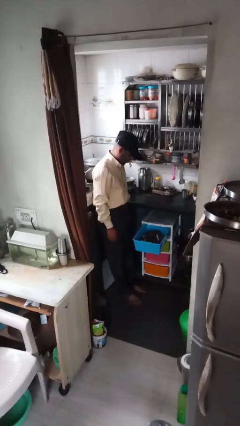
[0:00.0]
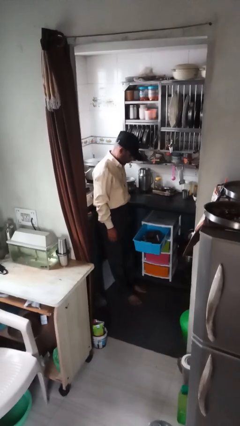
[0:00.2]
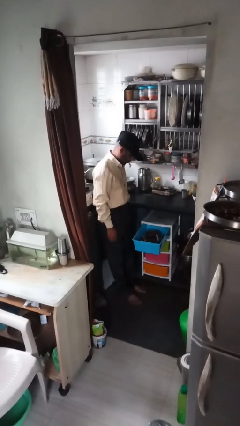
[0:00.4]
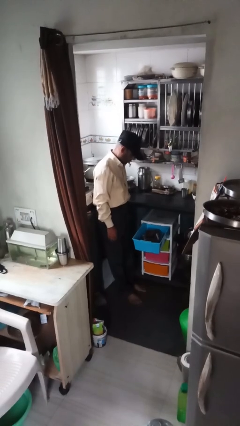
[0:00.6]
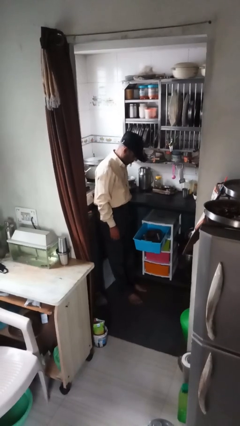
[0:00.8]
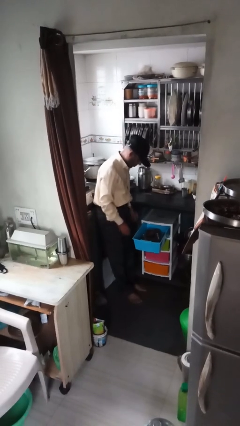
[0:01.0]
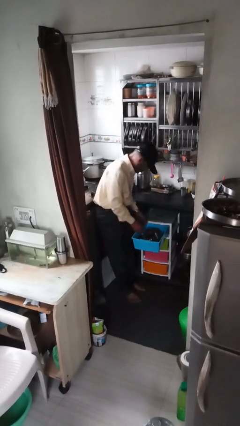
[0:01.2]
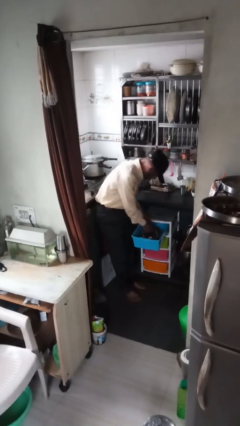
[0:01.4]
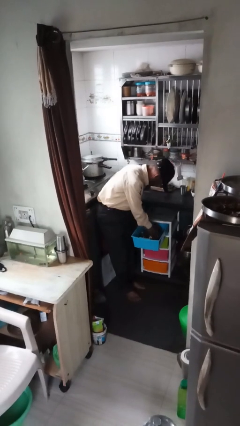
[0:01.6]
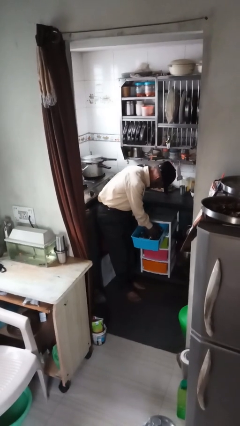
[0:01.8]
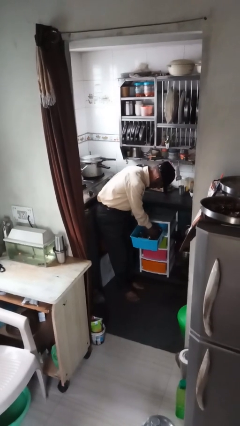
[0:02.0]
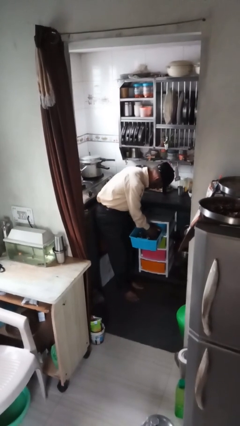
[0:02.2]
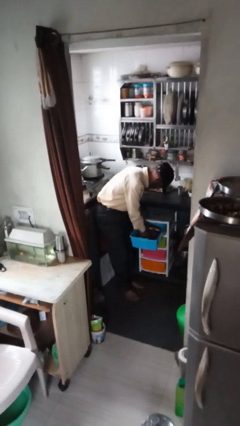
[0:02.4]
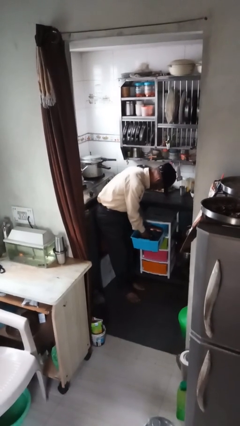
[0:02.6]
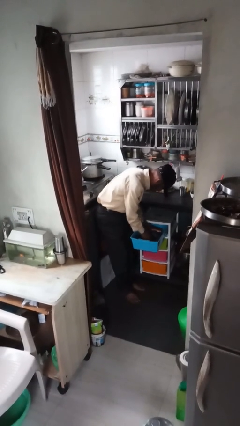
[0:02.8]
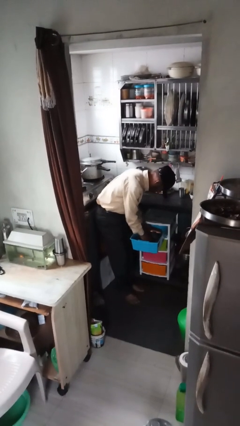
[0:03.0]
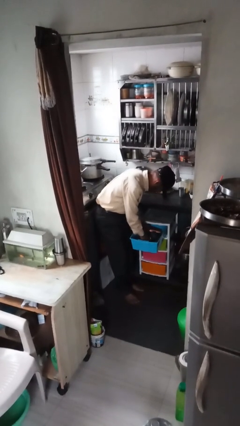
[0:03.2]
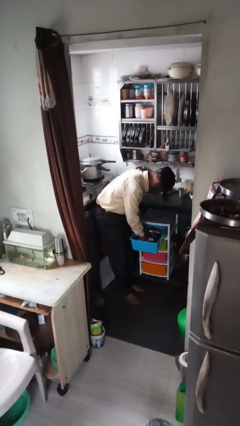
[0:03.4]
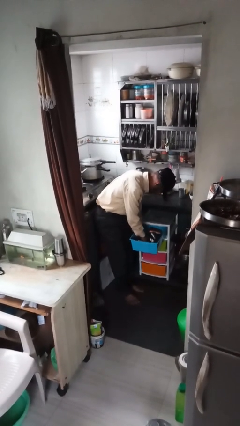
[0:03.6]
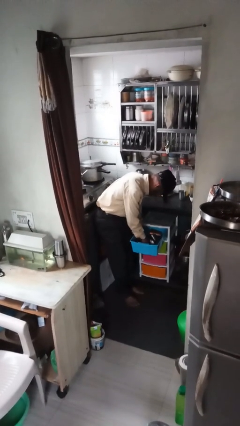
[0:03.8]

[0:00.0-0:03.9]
person searches in kitchen drawer

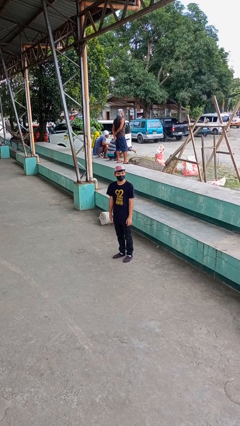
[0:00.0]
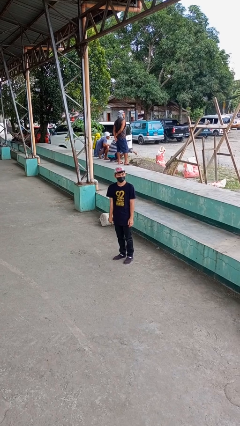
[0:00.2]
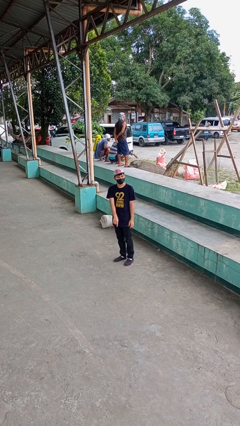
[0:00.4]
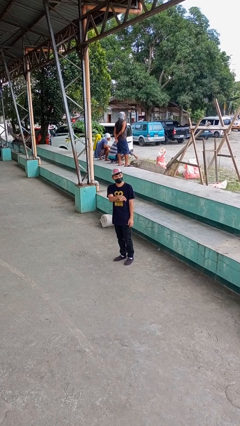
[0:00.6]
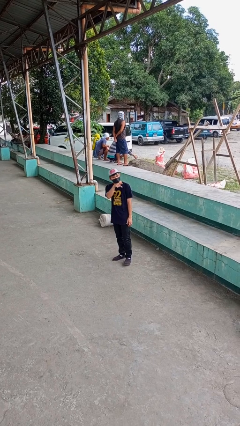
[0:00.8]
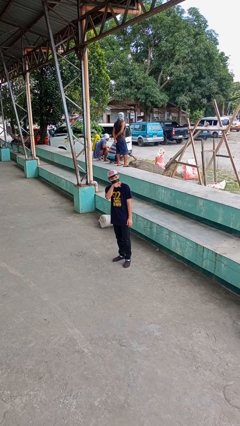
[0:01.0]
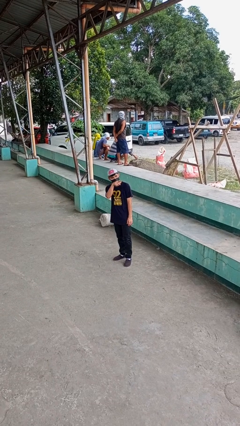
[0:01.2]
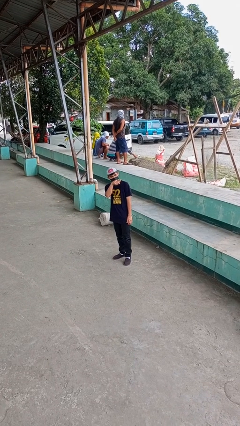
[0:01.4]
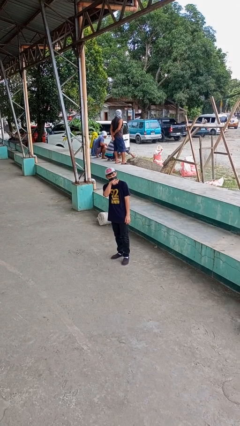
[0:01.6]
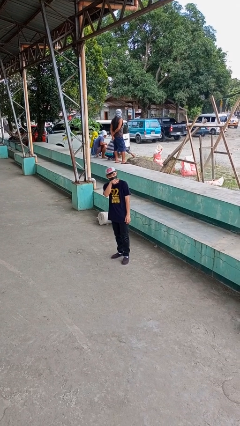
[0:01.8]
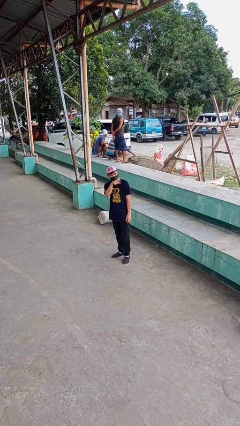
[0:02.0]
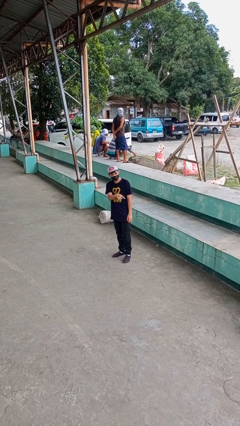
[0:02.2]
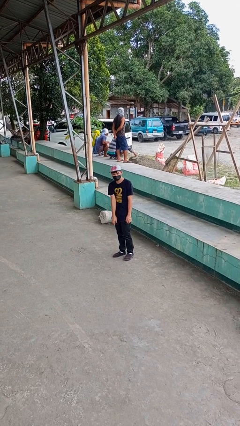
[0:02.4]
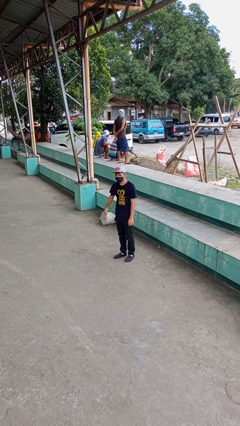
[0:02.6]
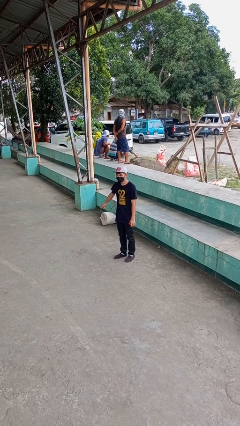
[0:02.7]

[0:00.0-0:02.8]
person points at person

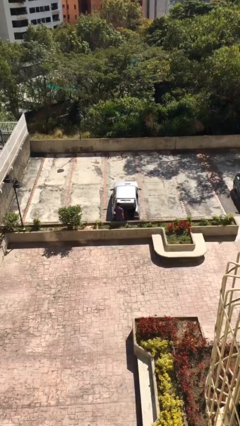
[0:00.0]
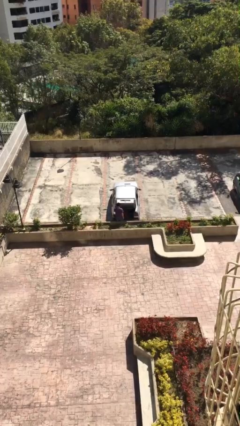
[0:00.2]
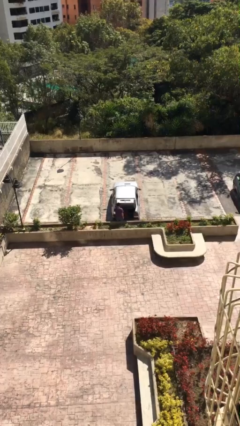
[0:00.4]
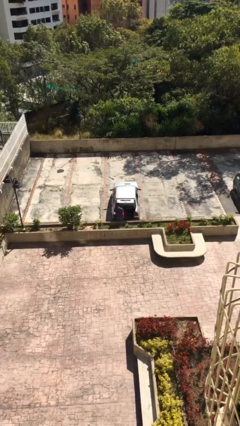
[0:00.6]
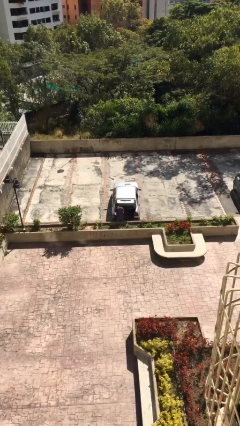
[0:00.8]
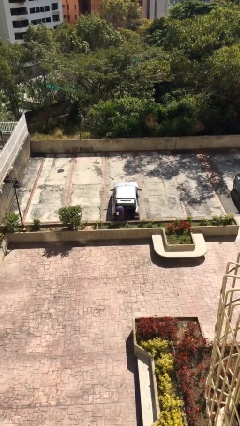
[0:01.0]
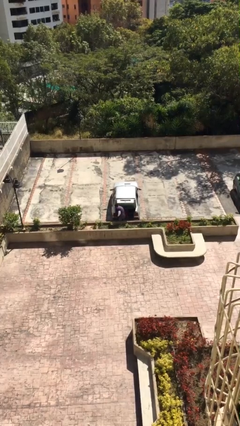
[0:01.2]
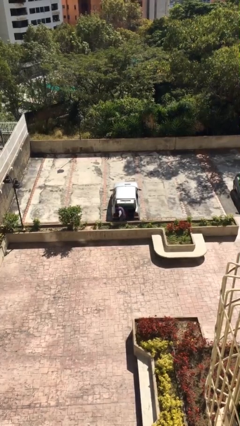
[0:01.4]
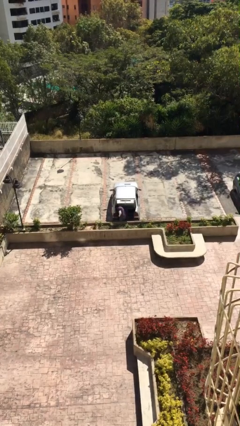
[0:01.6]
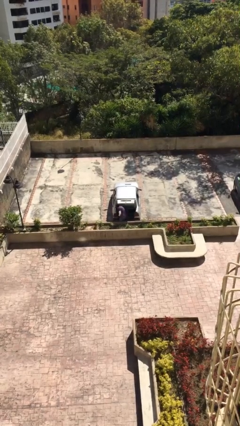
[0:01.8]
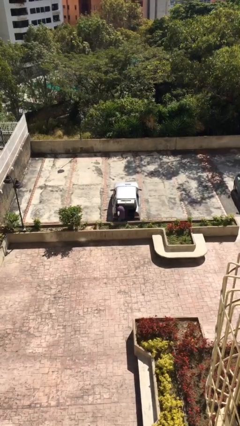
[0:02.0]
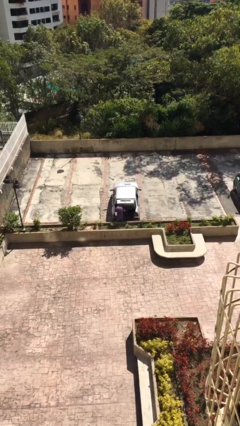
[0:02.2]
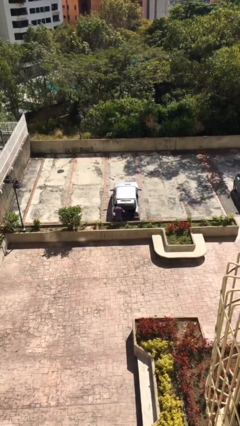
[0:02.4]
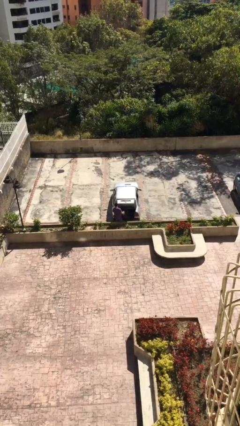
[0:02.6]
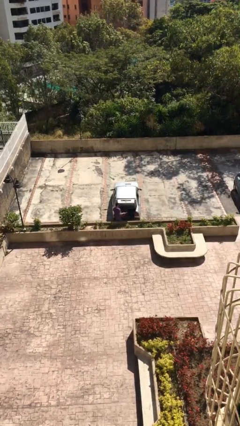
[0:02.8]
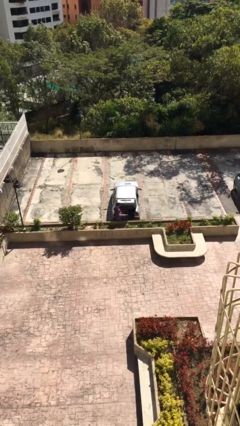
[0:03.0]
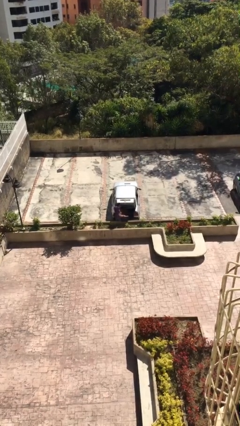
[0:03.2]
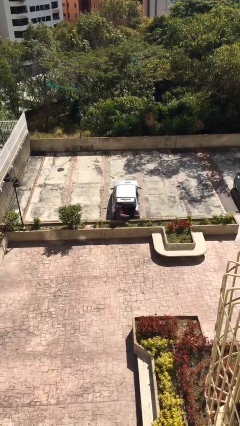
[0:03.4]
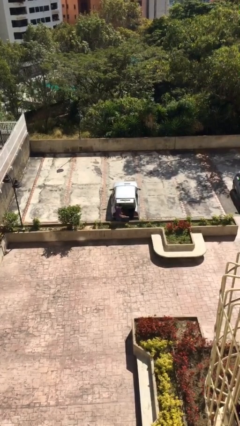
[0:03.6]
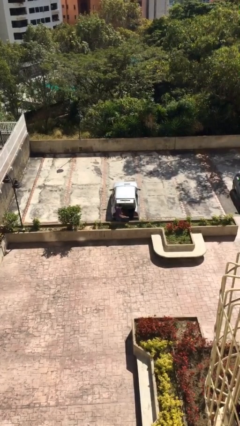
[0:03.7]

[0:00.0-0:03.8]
person unloads car

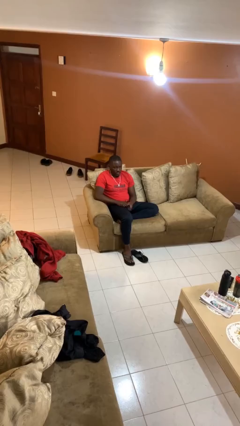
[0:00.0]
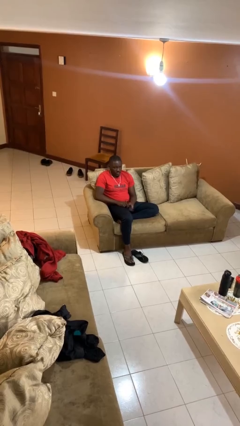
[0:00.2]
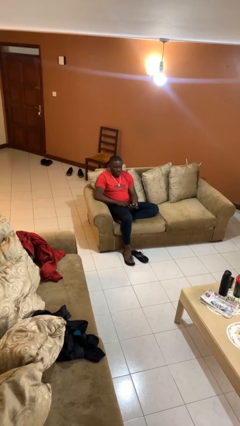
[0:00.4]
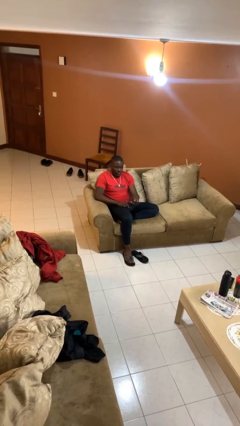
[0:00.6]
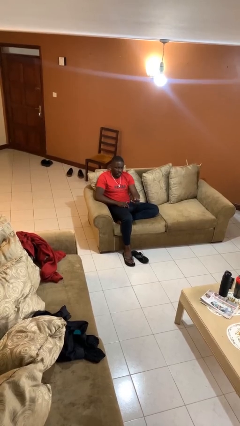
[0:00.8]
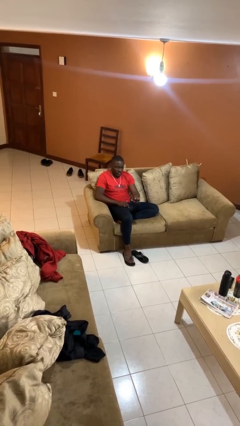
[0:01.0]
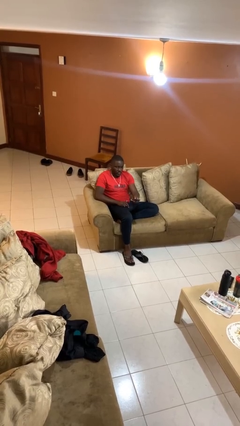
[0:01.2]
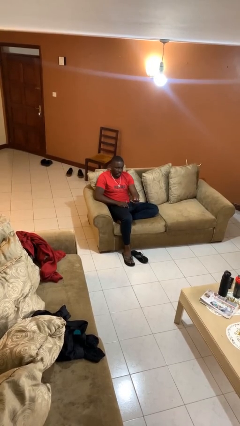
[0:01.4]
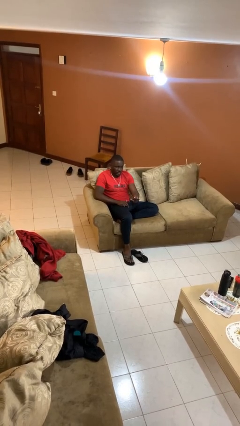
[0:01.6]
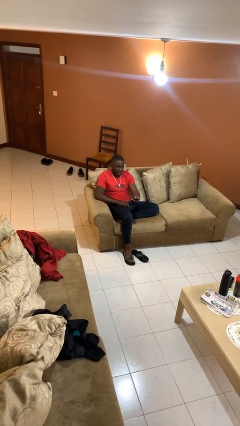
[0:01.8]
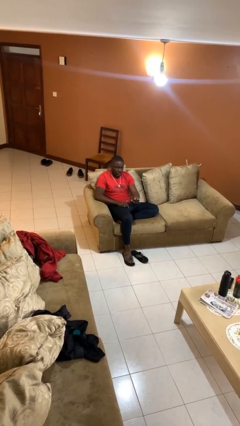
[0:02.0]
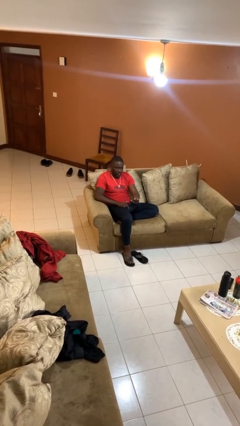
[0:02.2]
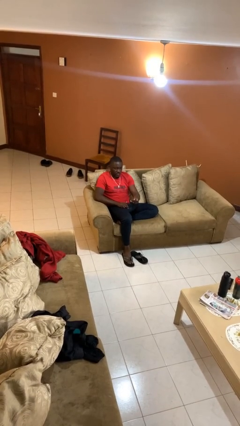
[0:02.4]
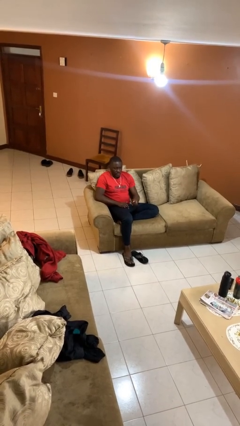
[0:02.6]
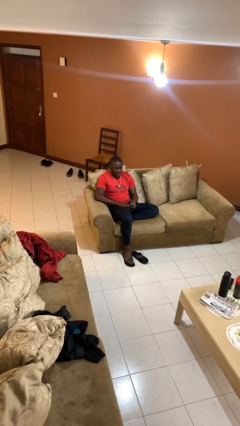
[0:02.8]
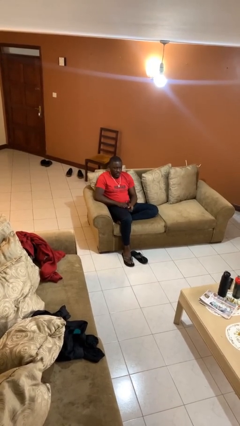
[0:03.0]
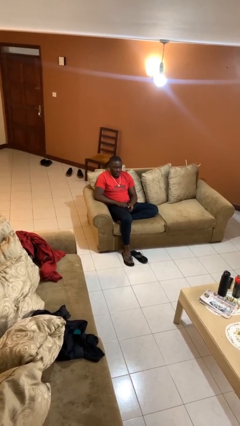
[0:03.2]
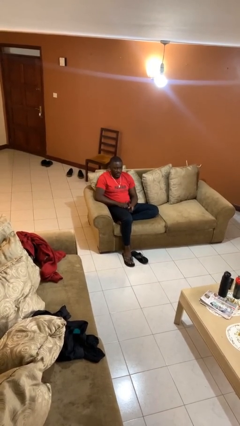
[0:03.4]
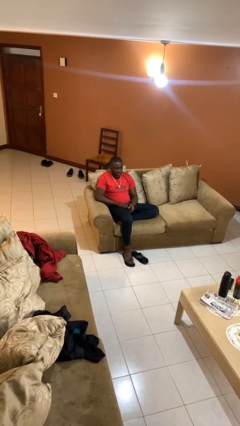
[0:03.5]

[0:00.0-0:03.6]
person uses television remote

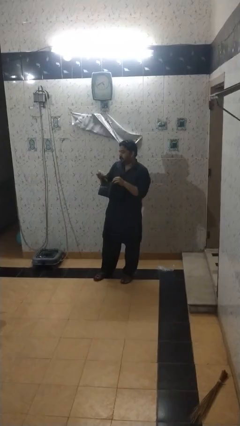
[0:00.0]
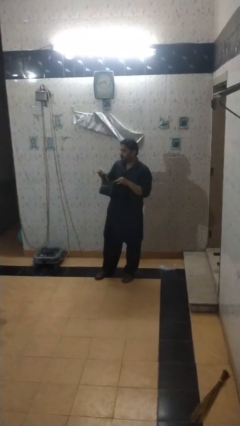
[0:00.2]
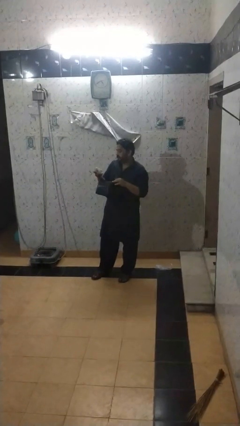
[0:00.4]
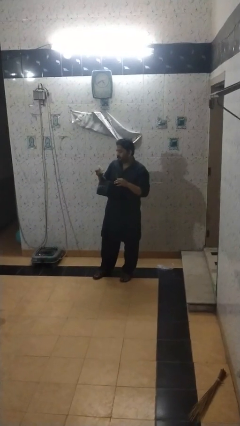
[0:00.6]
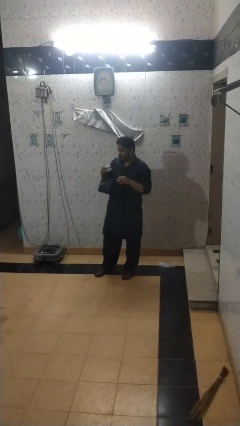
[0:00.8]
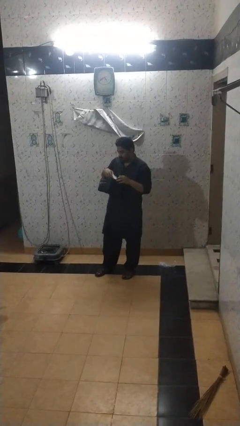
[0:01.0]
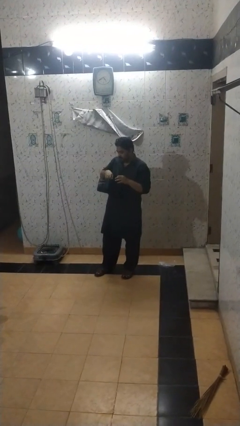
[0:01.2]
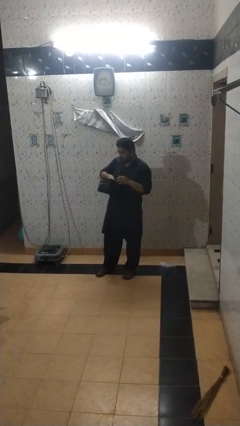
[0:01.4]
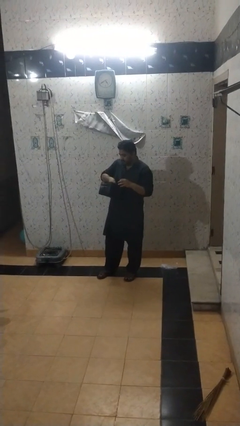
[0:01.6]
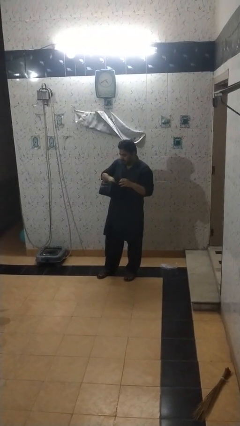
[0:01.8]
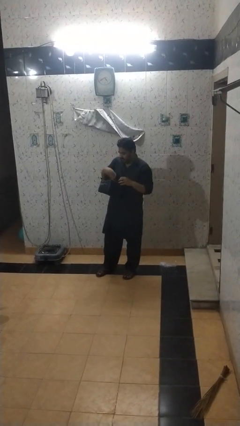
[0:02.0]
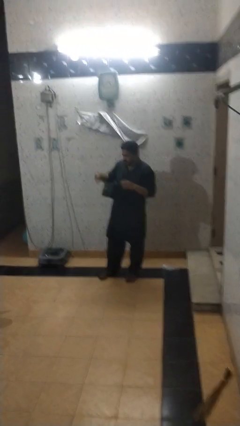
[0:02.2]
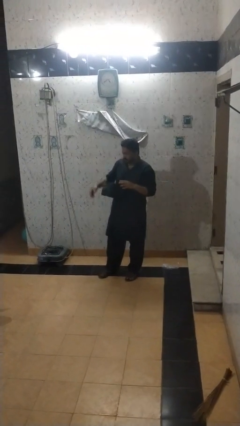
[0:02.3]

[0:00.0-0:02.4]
person puts object into backpack

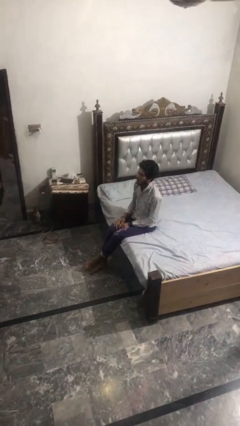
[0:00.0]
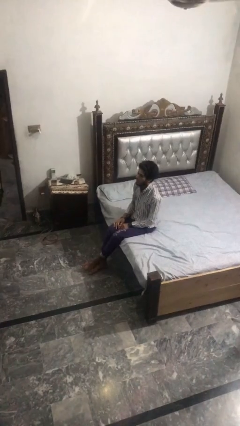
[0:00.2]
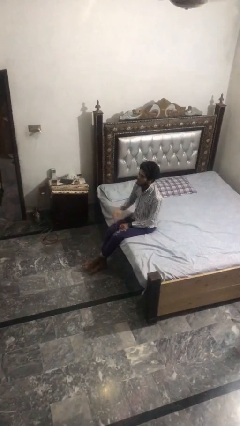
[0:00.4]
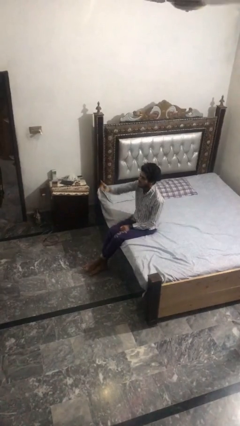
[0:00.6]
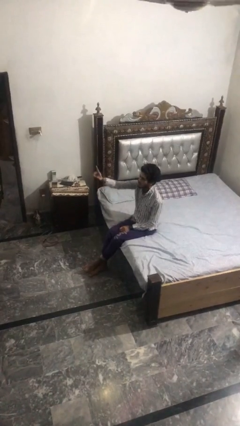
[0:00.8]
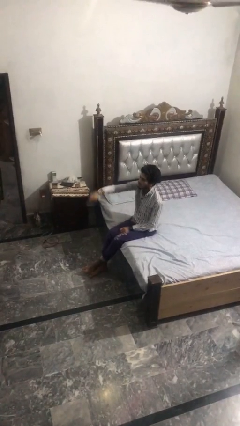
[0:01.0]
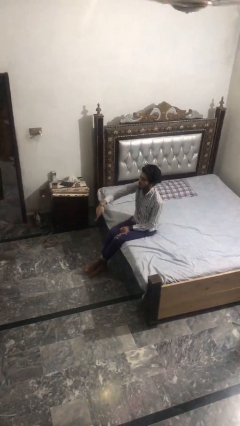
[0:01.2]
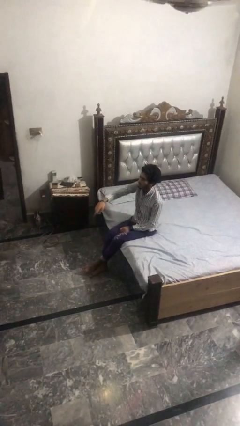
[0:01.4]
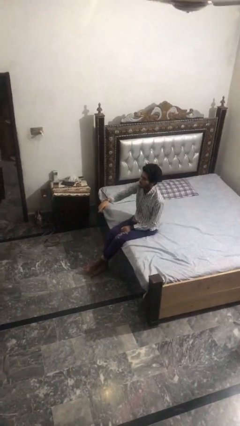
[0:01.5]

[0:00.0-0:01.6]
person gestures swipe down
